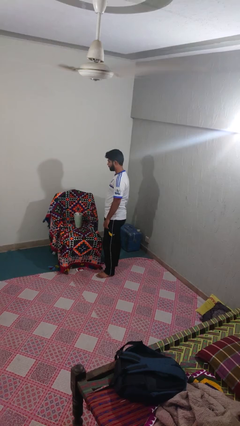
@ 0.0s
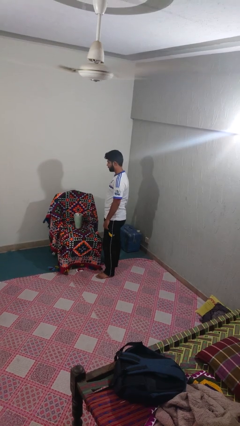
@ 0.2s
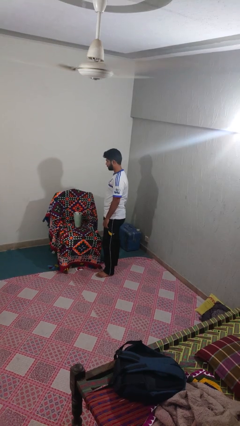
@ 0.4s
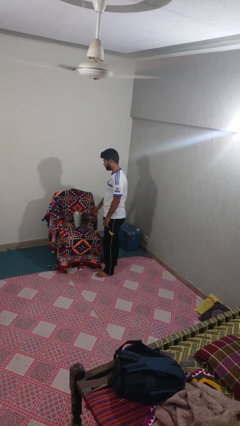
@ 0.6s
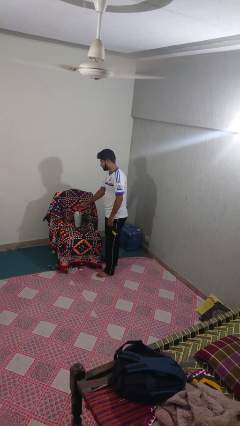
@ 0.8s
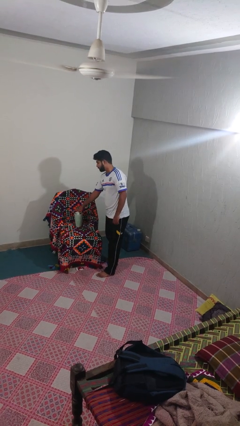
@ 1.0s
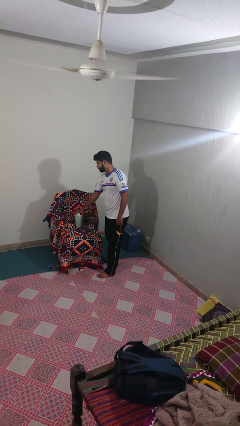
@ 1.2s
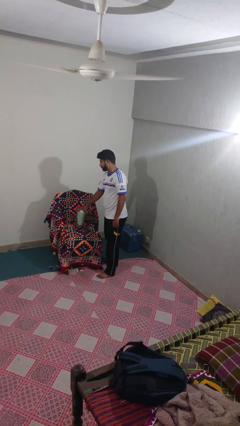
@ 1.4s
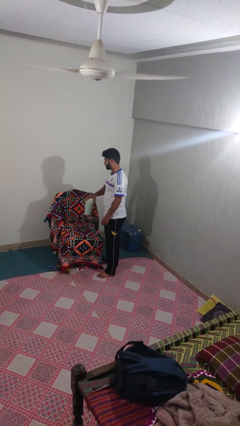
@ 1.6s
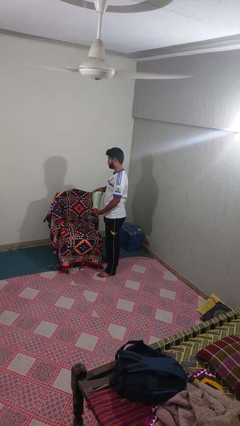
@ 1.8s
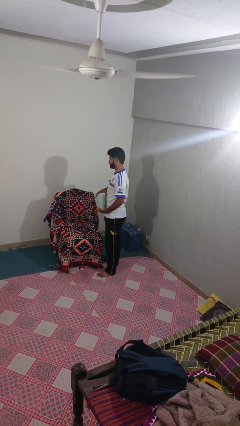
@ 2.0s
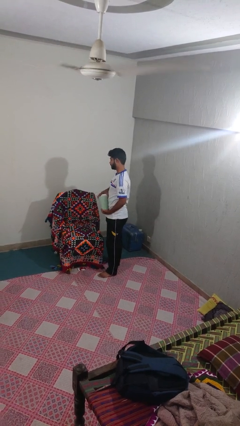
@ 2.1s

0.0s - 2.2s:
person picks up object from couch

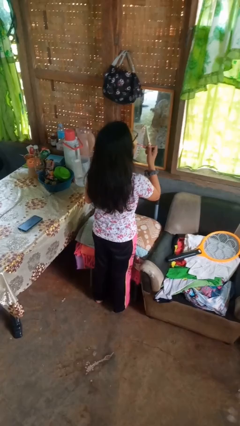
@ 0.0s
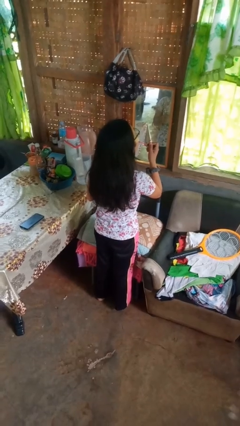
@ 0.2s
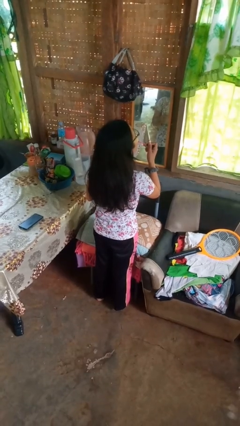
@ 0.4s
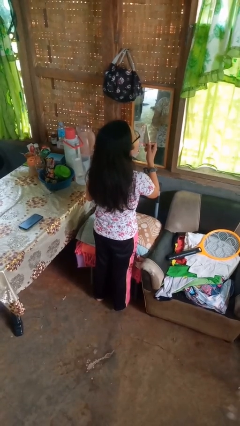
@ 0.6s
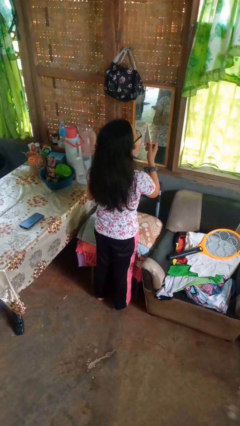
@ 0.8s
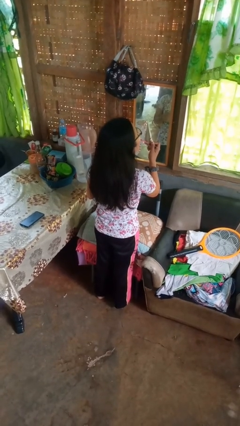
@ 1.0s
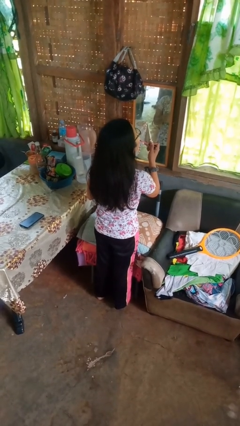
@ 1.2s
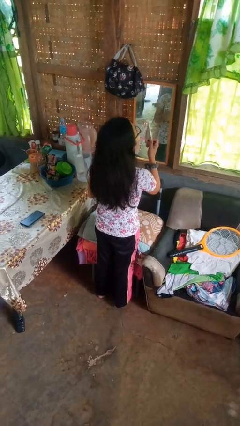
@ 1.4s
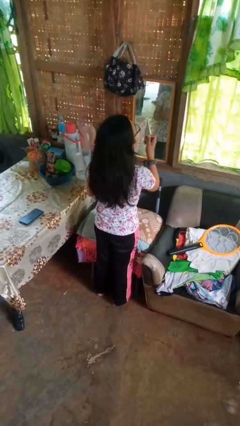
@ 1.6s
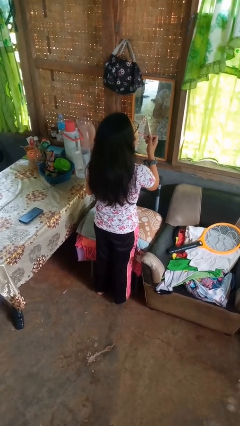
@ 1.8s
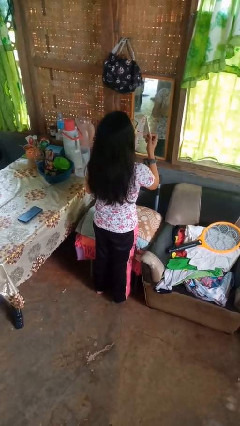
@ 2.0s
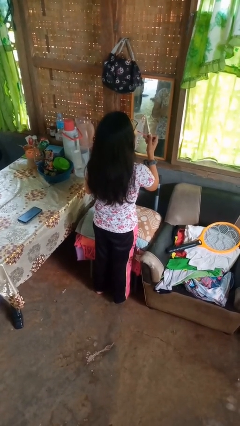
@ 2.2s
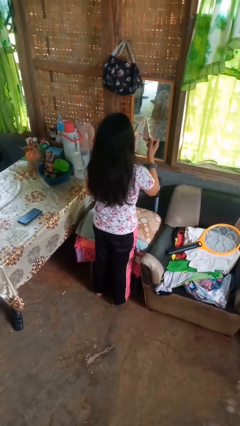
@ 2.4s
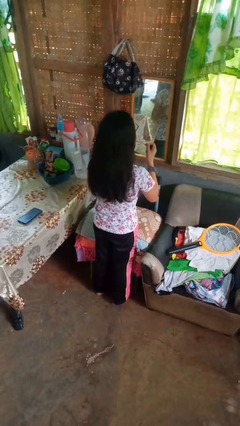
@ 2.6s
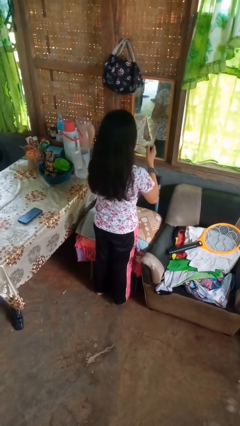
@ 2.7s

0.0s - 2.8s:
person applies lip makeup

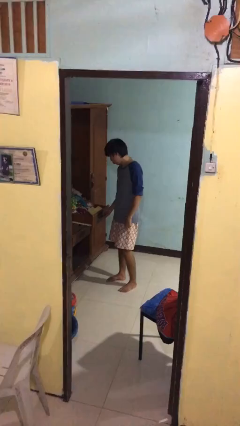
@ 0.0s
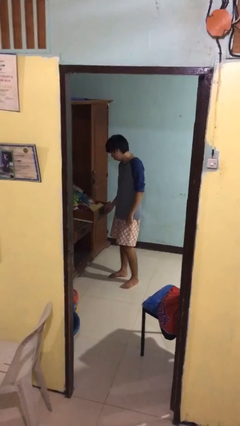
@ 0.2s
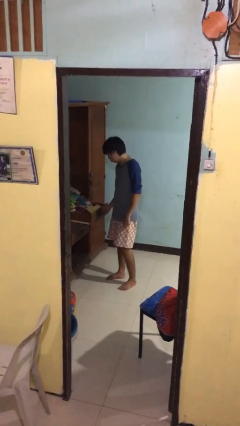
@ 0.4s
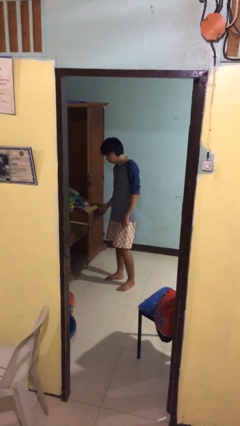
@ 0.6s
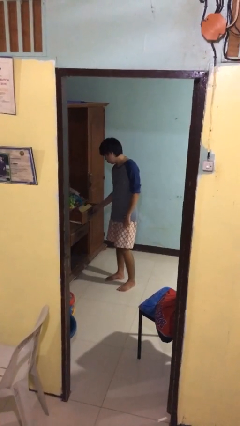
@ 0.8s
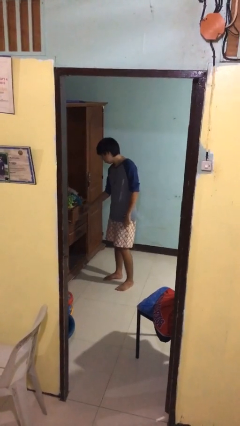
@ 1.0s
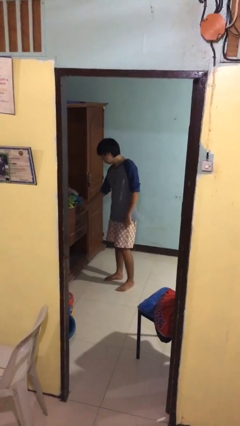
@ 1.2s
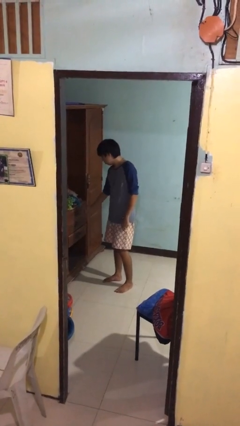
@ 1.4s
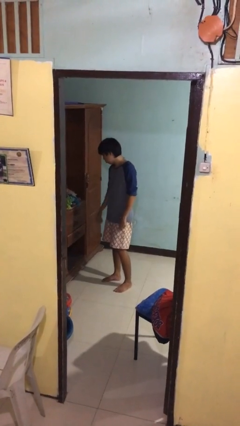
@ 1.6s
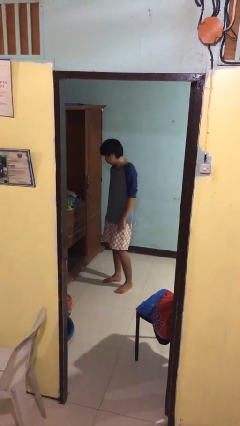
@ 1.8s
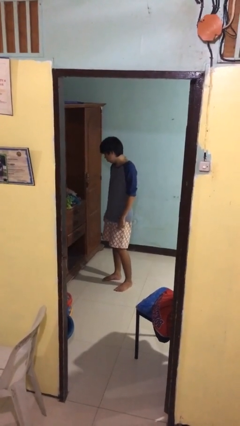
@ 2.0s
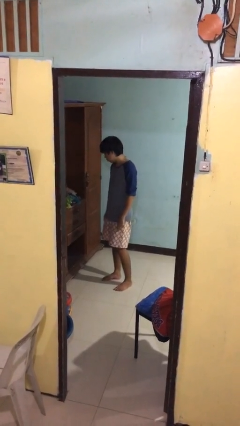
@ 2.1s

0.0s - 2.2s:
person closes dresser drawer

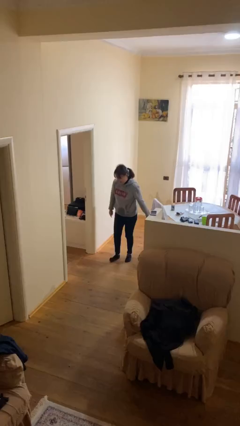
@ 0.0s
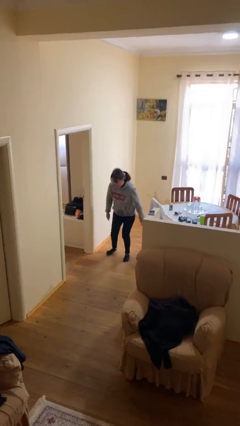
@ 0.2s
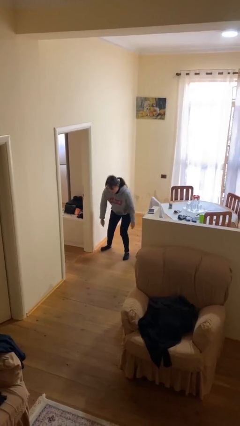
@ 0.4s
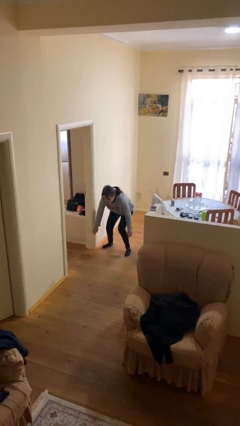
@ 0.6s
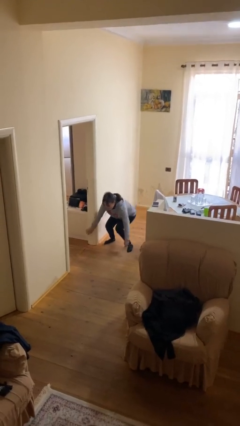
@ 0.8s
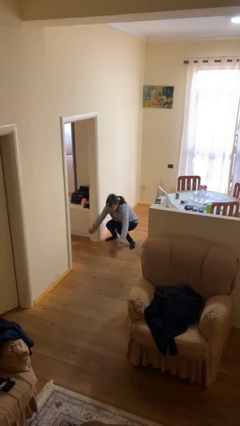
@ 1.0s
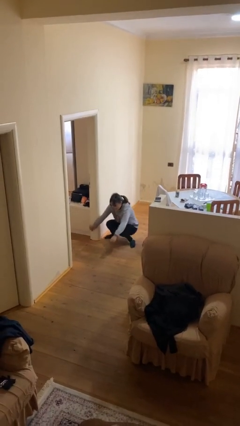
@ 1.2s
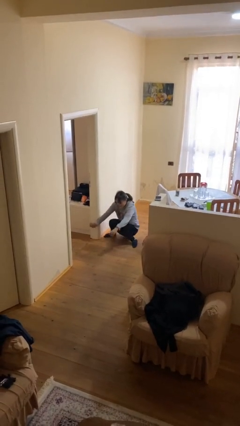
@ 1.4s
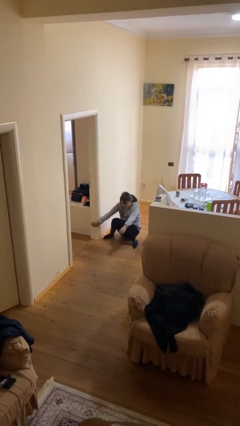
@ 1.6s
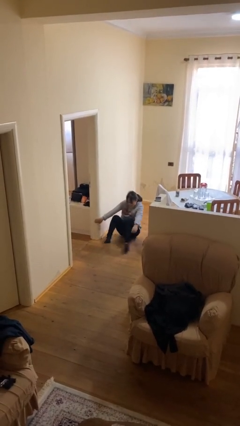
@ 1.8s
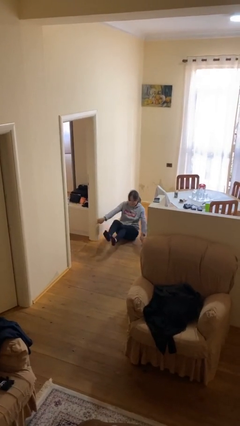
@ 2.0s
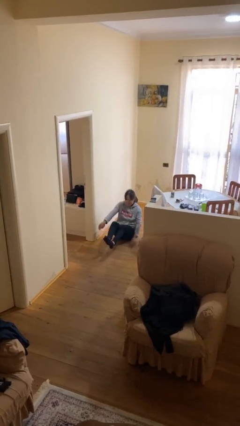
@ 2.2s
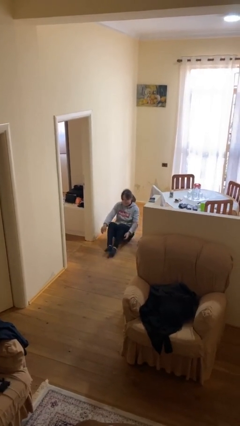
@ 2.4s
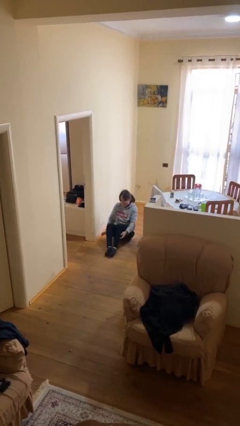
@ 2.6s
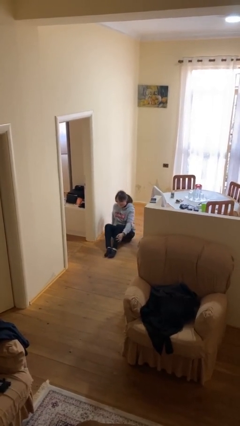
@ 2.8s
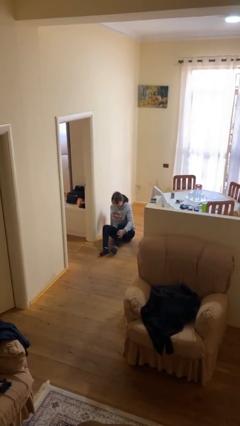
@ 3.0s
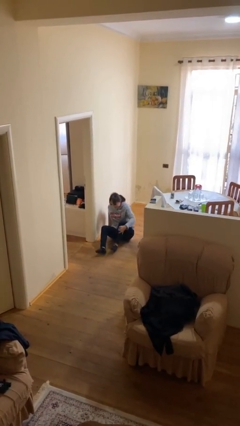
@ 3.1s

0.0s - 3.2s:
person sits down

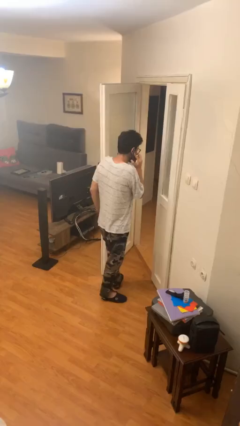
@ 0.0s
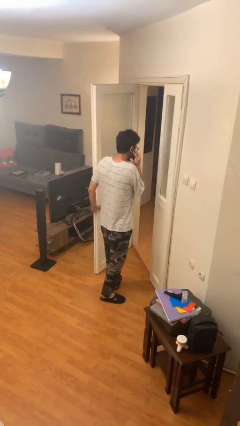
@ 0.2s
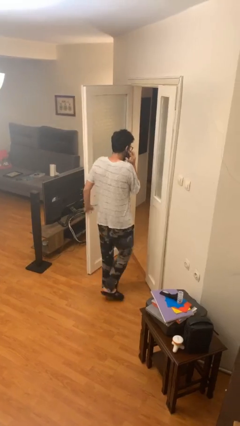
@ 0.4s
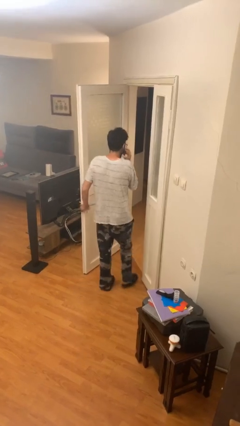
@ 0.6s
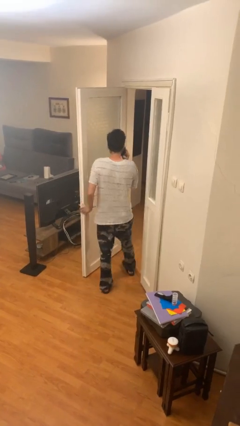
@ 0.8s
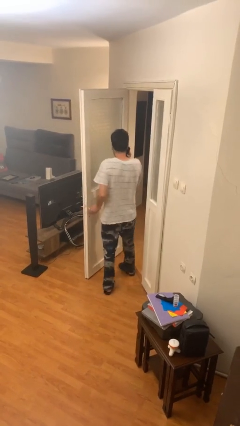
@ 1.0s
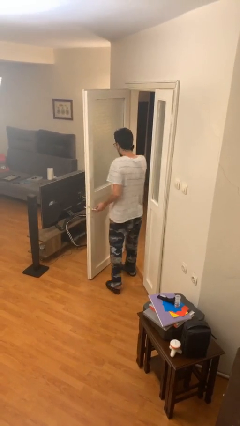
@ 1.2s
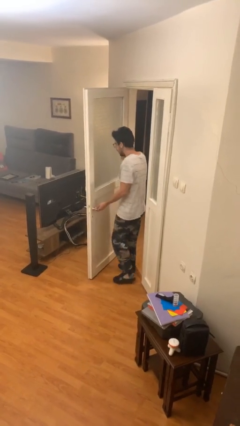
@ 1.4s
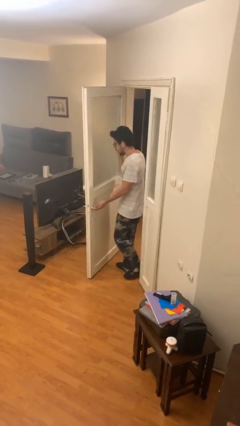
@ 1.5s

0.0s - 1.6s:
person exits scene through structure

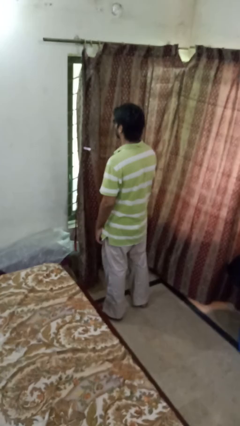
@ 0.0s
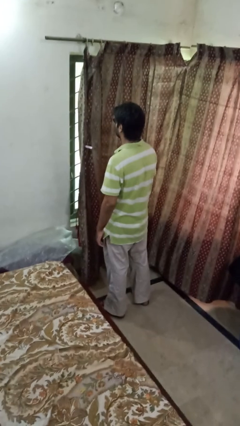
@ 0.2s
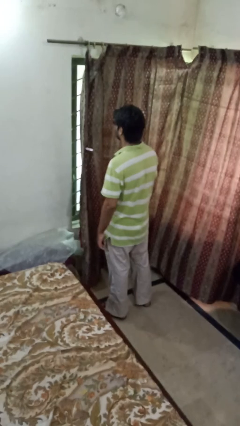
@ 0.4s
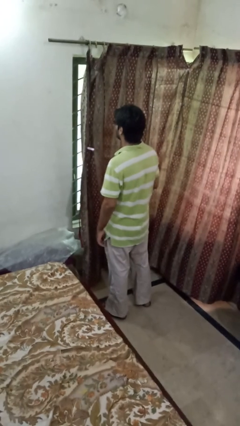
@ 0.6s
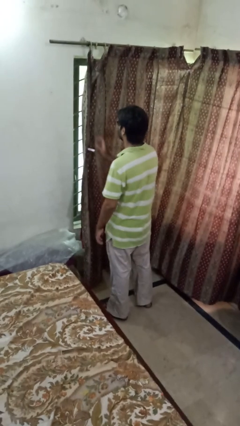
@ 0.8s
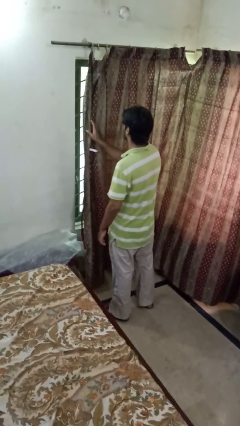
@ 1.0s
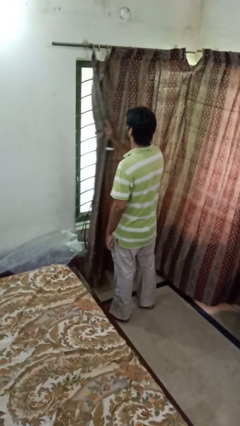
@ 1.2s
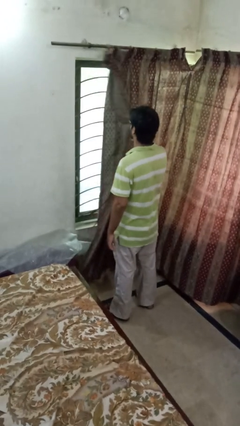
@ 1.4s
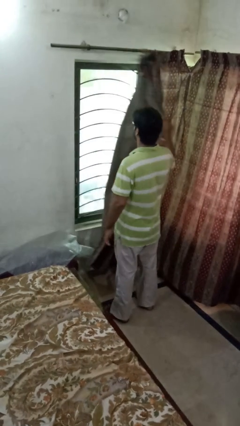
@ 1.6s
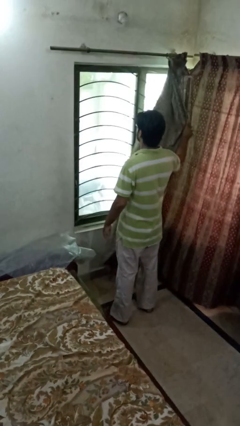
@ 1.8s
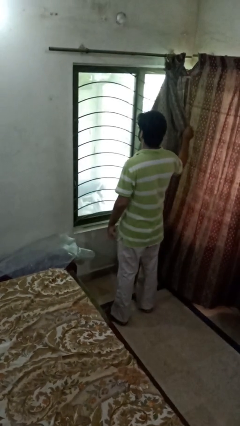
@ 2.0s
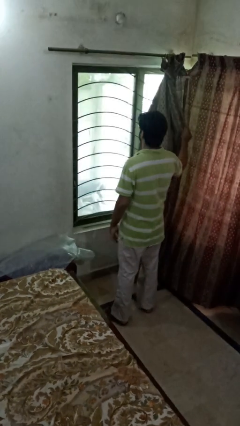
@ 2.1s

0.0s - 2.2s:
person opens curtains

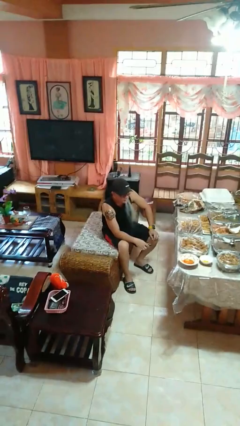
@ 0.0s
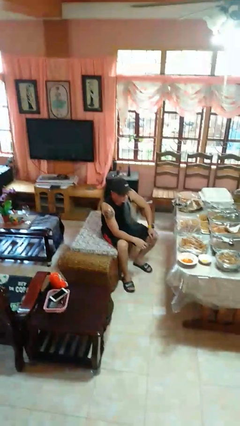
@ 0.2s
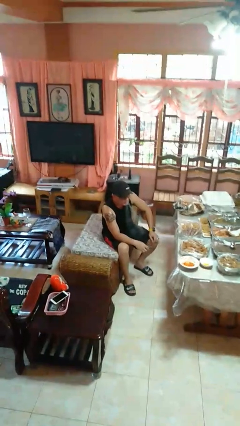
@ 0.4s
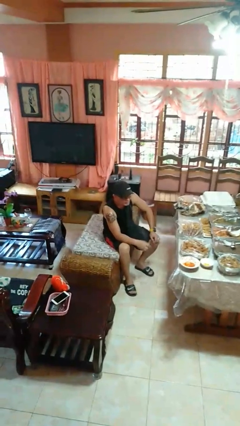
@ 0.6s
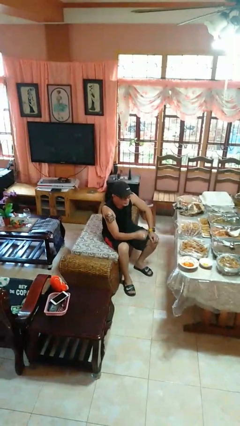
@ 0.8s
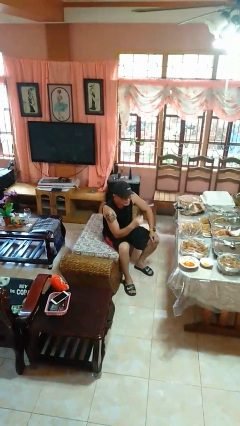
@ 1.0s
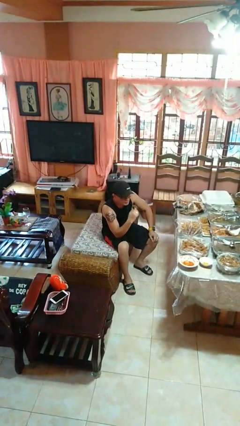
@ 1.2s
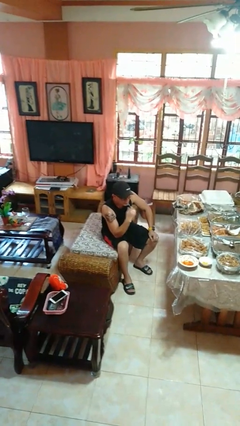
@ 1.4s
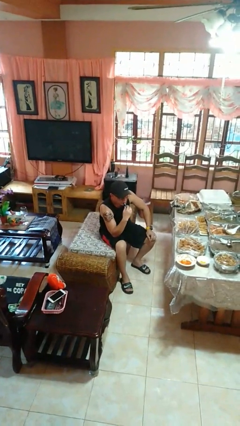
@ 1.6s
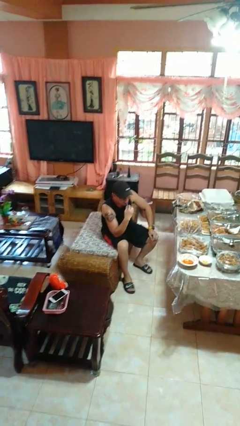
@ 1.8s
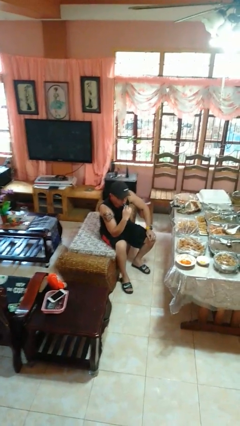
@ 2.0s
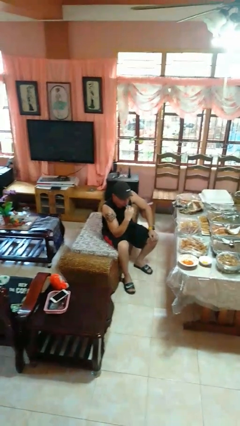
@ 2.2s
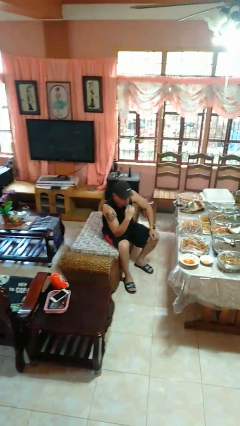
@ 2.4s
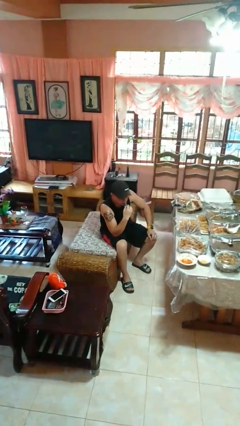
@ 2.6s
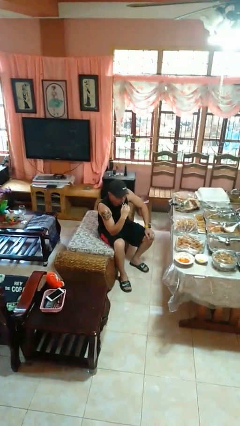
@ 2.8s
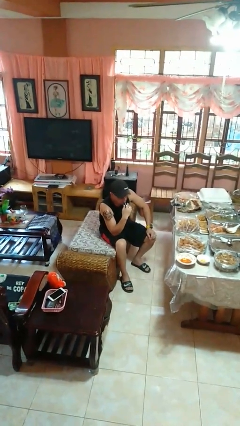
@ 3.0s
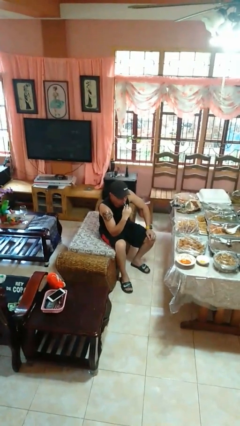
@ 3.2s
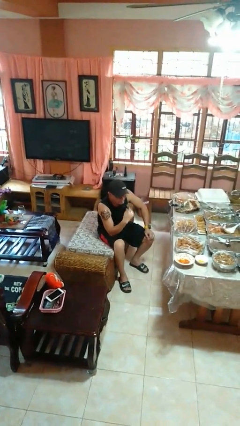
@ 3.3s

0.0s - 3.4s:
person vapes
